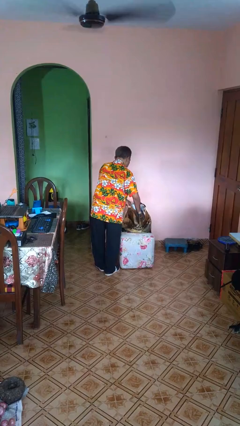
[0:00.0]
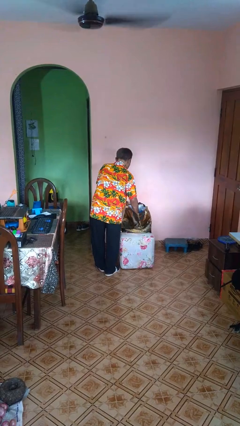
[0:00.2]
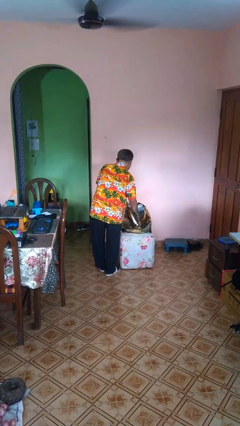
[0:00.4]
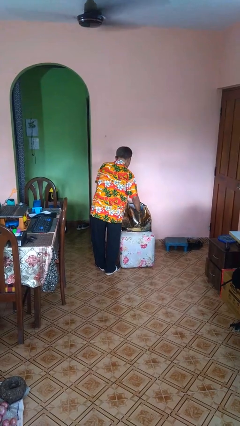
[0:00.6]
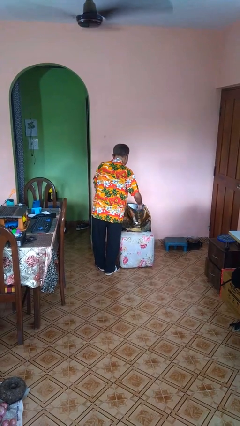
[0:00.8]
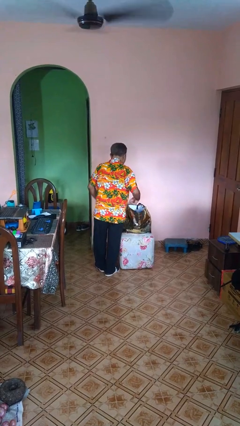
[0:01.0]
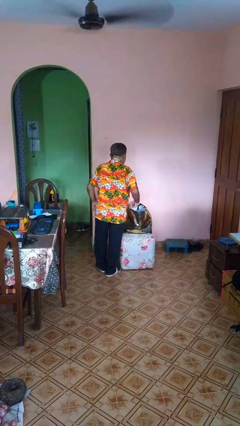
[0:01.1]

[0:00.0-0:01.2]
person puts object into bag

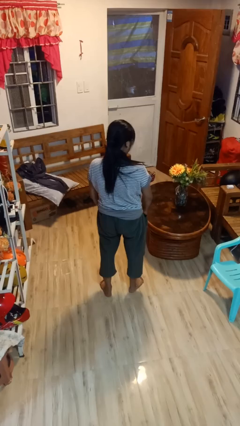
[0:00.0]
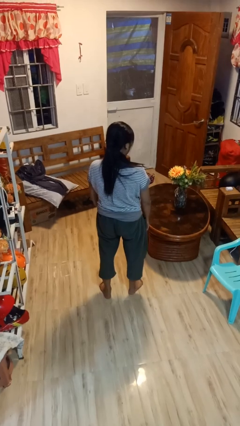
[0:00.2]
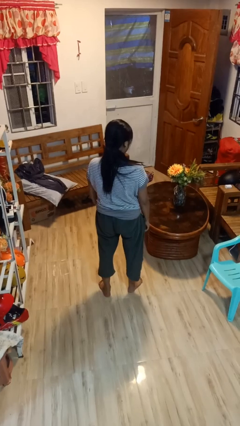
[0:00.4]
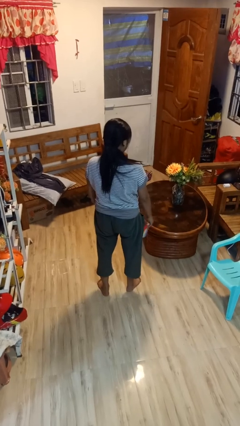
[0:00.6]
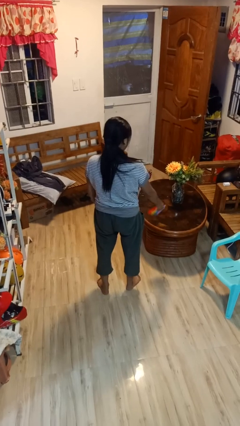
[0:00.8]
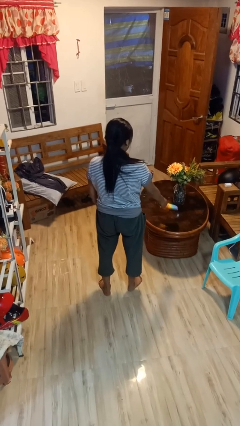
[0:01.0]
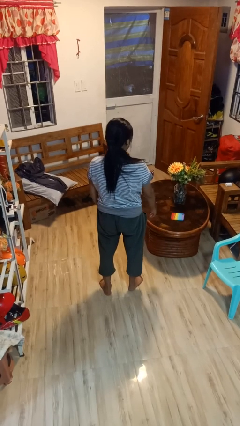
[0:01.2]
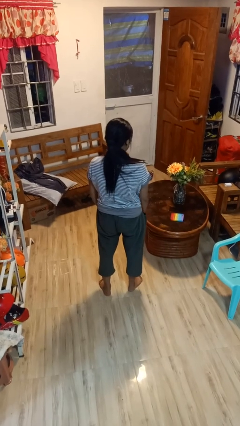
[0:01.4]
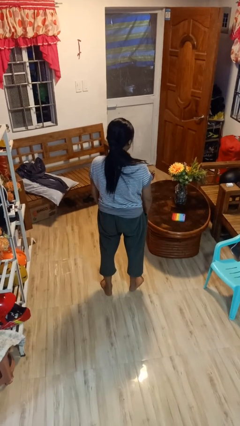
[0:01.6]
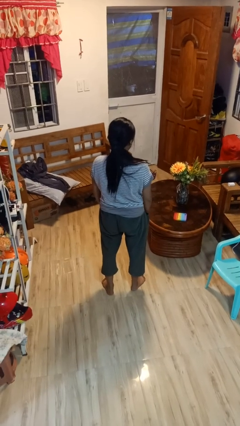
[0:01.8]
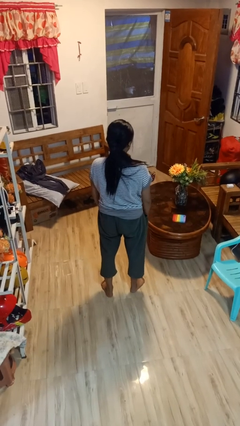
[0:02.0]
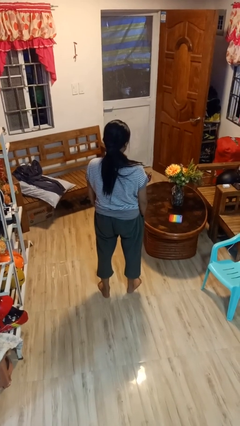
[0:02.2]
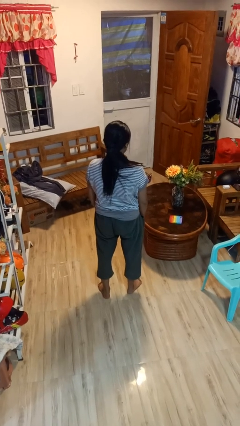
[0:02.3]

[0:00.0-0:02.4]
person throws object on table

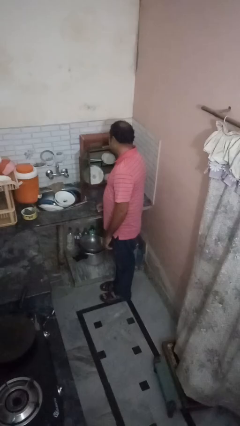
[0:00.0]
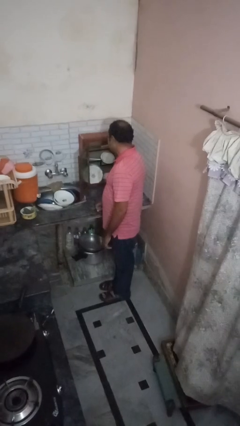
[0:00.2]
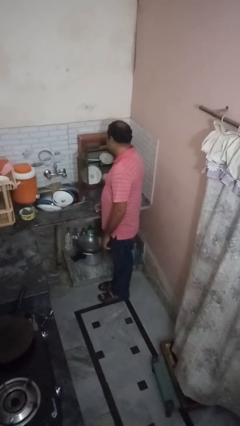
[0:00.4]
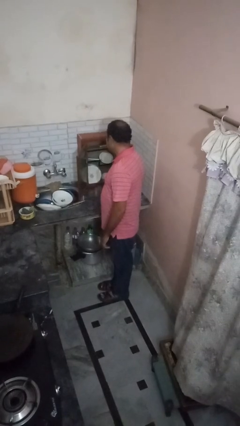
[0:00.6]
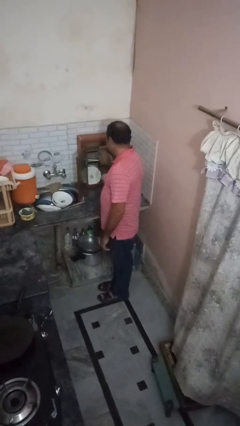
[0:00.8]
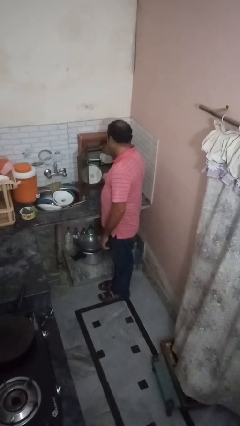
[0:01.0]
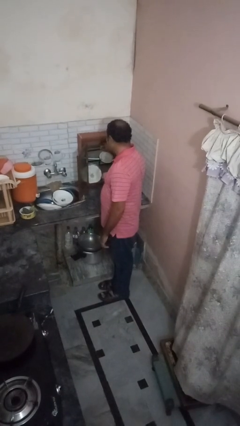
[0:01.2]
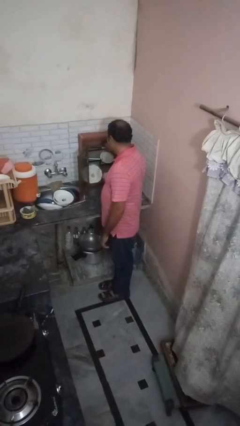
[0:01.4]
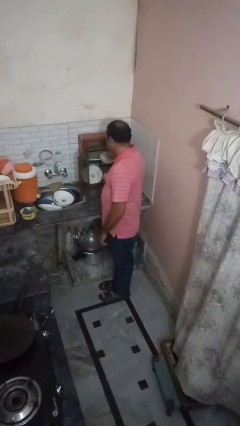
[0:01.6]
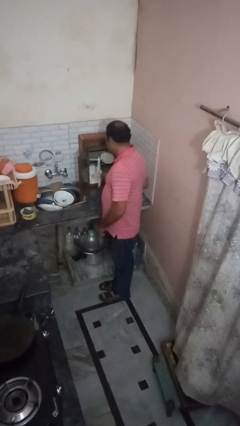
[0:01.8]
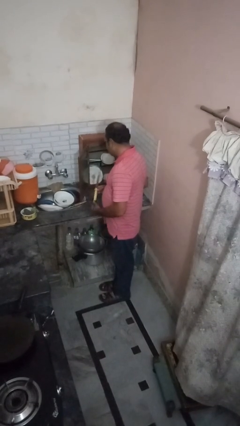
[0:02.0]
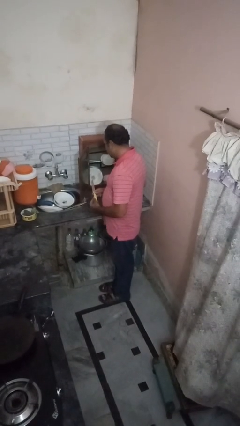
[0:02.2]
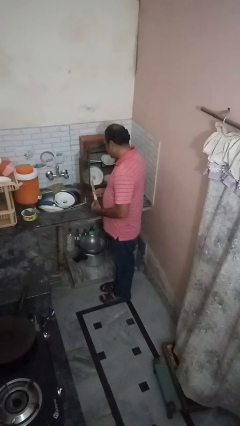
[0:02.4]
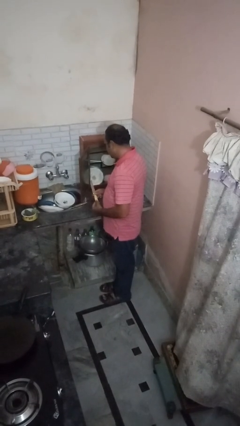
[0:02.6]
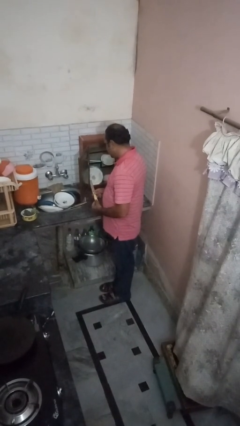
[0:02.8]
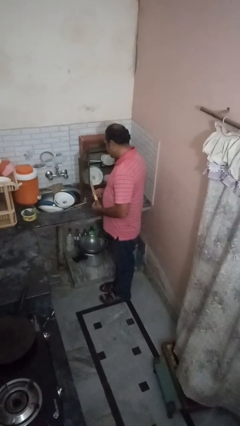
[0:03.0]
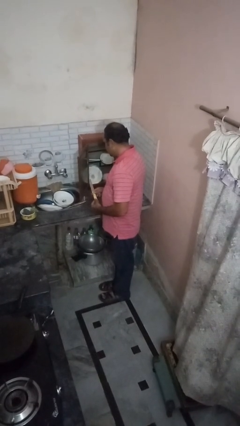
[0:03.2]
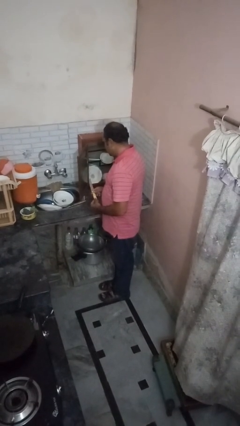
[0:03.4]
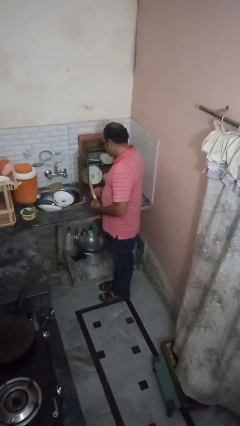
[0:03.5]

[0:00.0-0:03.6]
person puts object in cabinet

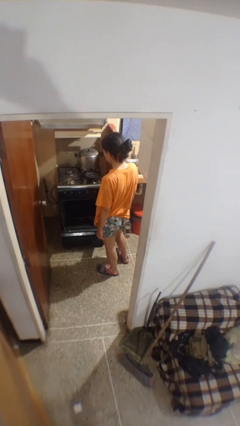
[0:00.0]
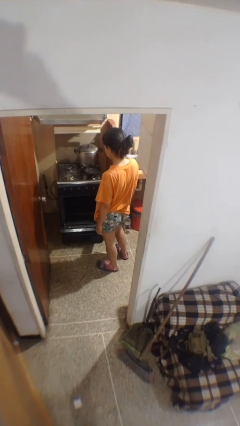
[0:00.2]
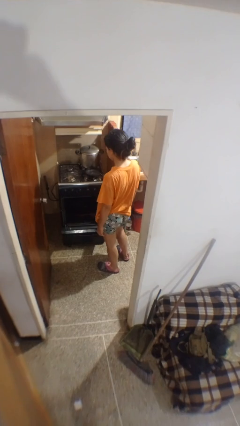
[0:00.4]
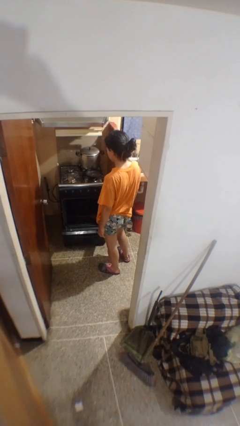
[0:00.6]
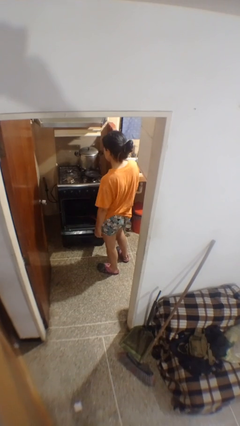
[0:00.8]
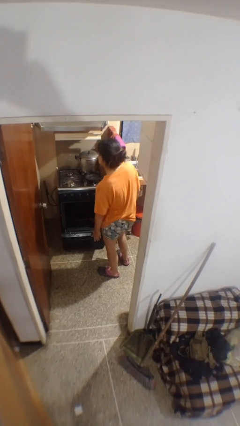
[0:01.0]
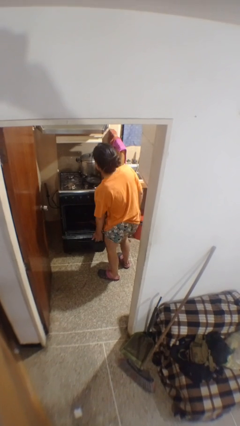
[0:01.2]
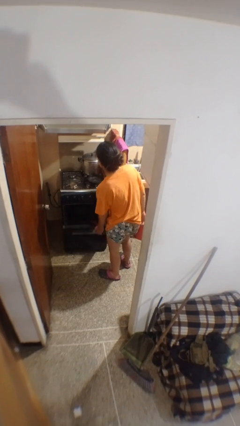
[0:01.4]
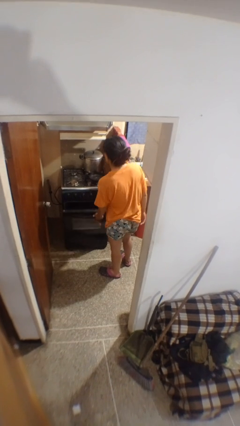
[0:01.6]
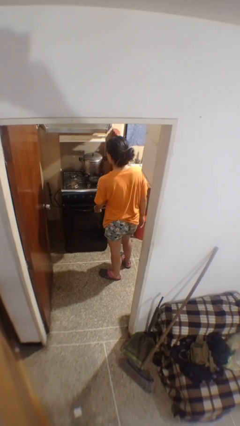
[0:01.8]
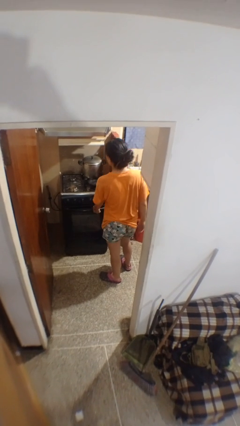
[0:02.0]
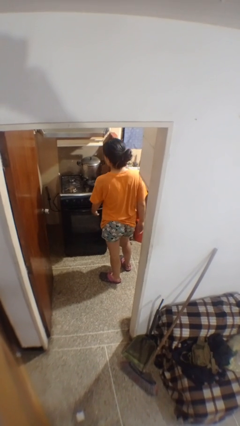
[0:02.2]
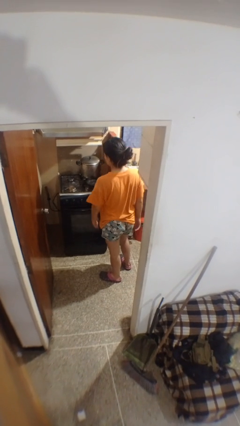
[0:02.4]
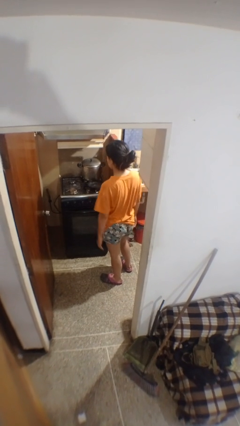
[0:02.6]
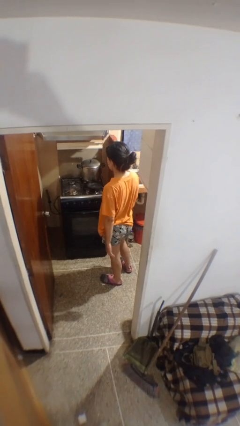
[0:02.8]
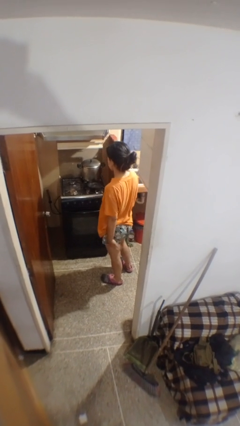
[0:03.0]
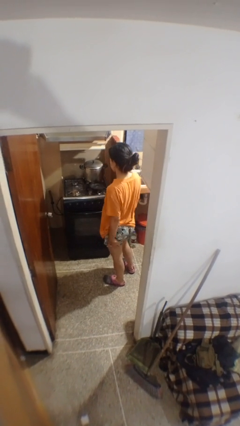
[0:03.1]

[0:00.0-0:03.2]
person closes oven door

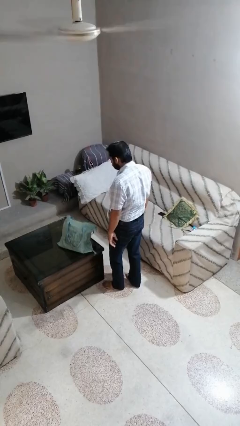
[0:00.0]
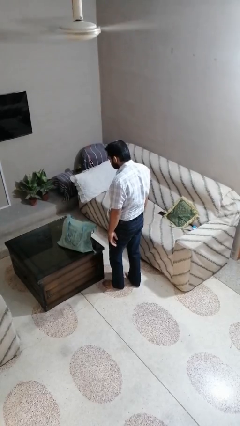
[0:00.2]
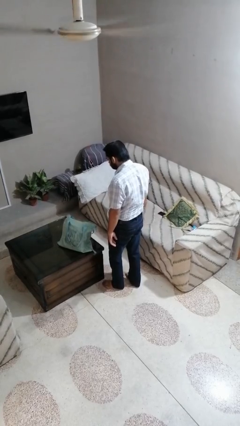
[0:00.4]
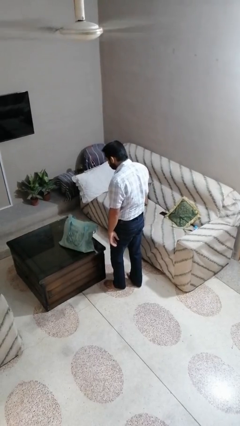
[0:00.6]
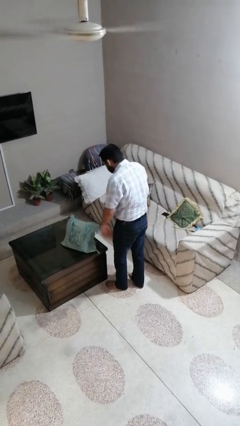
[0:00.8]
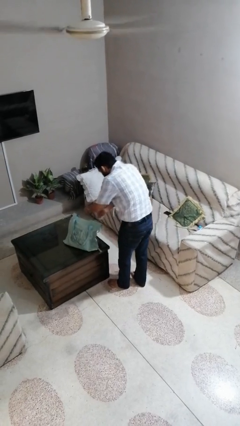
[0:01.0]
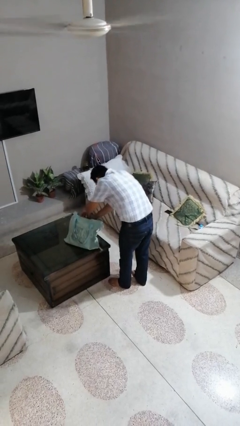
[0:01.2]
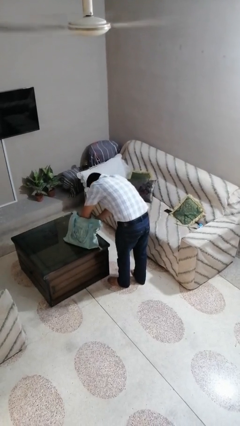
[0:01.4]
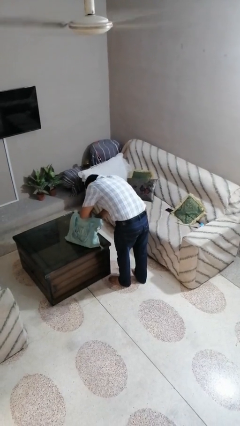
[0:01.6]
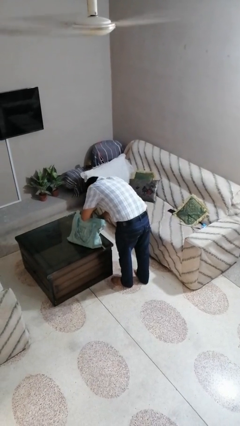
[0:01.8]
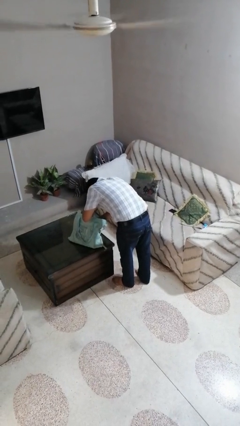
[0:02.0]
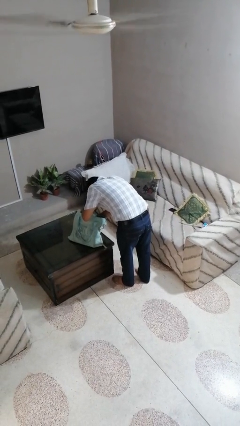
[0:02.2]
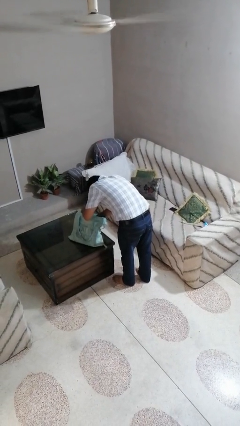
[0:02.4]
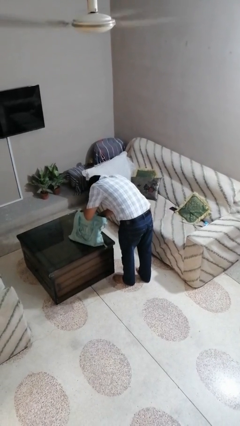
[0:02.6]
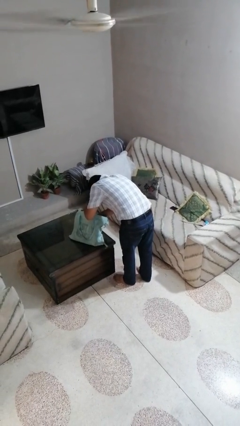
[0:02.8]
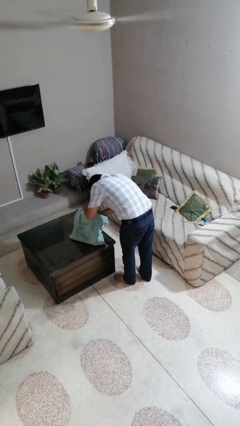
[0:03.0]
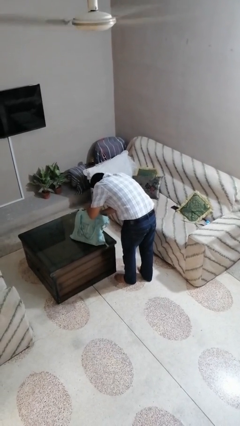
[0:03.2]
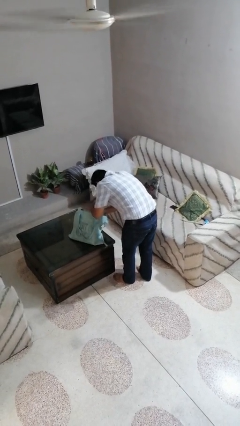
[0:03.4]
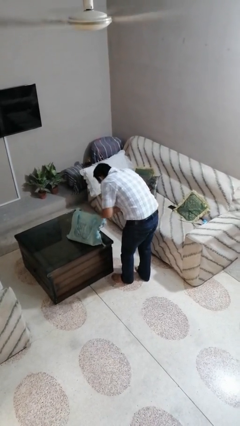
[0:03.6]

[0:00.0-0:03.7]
person searches in bag

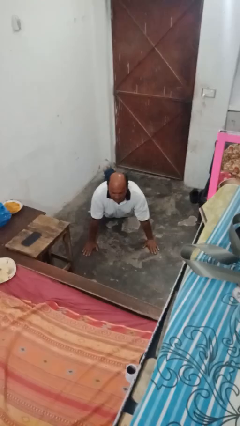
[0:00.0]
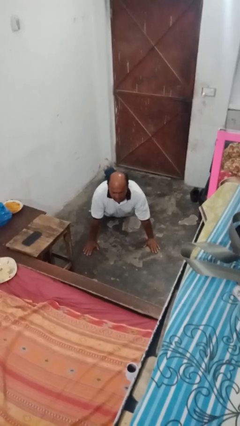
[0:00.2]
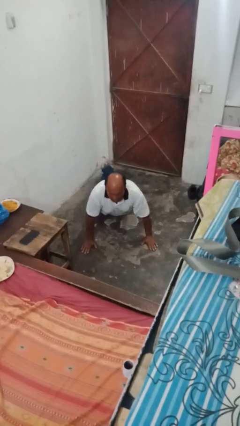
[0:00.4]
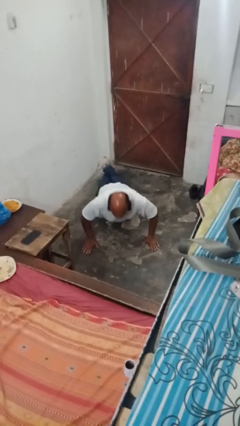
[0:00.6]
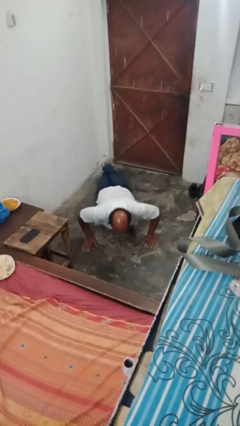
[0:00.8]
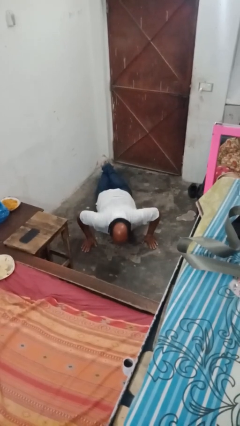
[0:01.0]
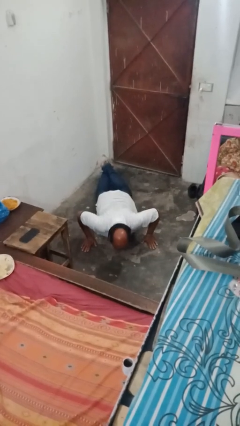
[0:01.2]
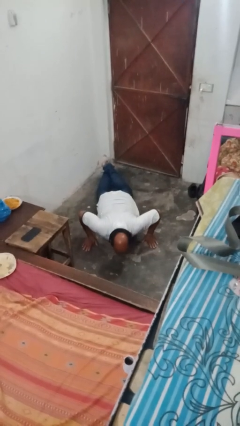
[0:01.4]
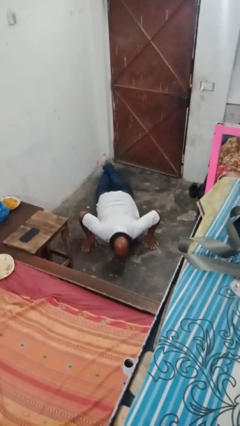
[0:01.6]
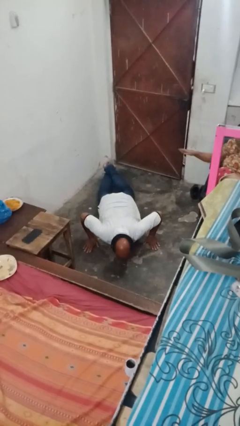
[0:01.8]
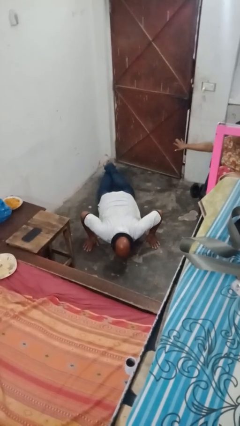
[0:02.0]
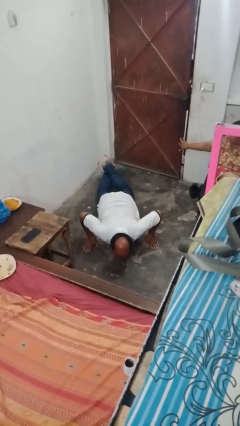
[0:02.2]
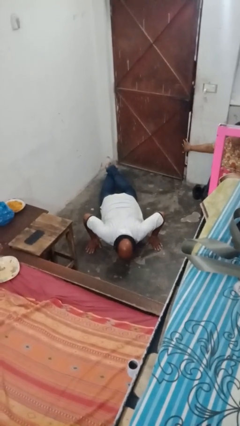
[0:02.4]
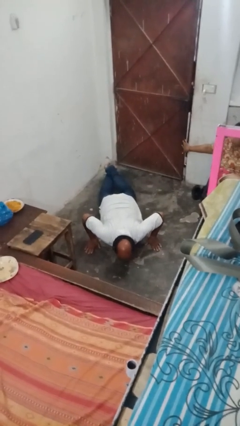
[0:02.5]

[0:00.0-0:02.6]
person exercises with pushup

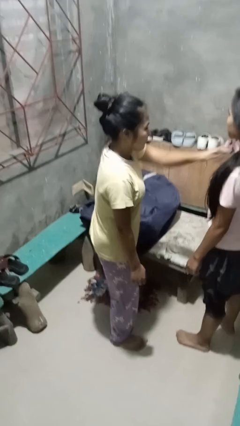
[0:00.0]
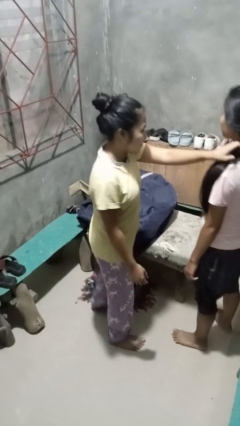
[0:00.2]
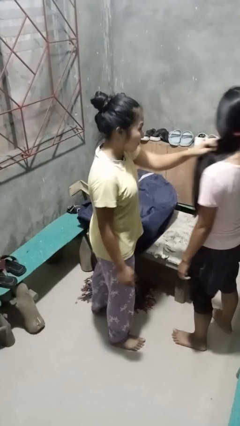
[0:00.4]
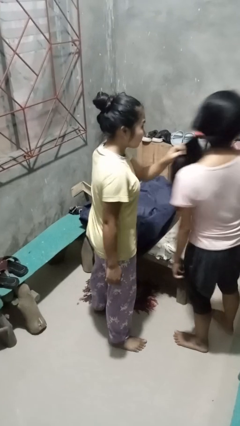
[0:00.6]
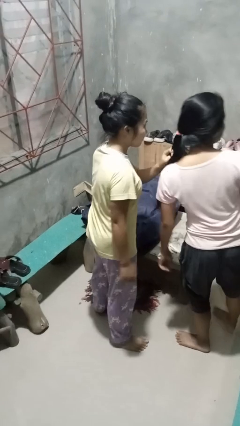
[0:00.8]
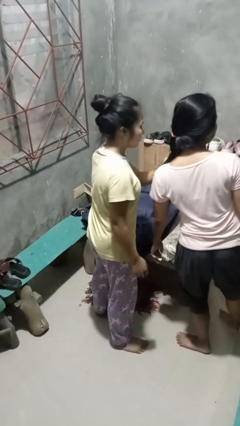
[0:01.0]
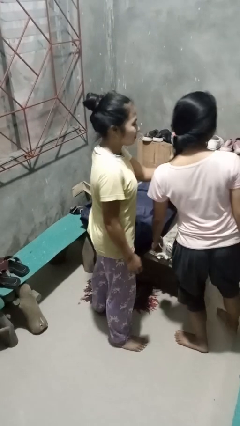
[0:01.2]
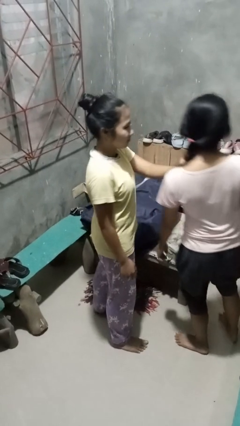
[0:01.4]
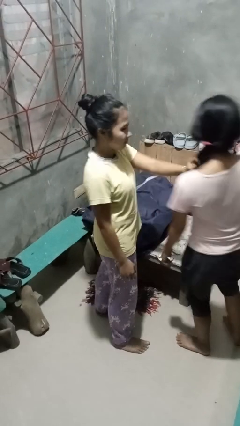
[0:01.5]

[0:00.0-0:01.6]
person grabs person by hair
